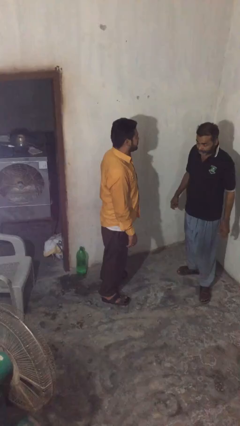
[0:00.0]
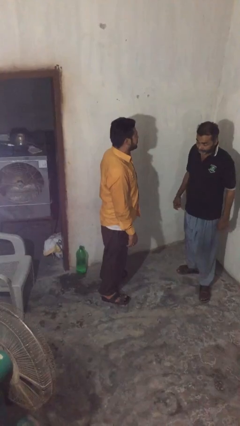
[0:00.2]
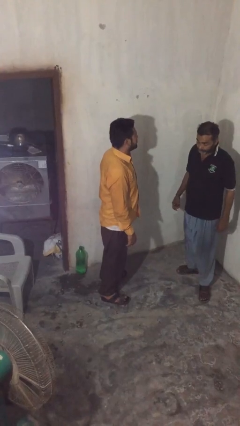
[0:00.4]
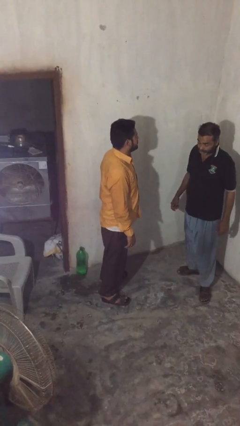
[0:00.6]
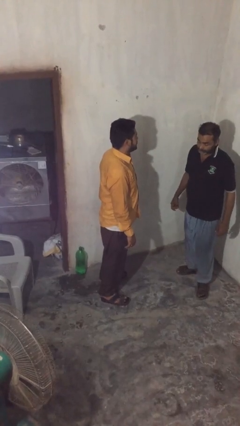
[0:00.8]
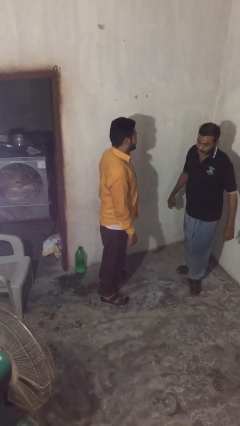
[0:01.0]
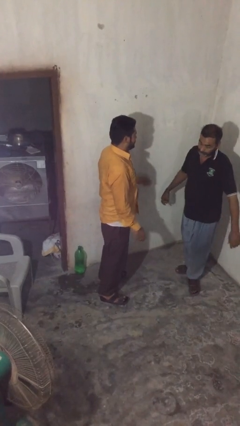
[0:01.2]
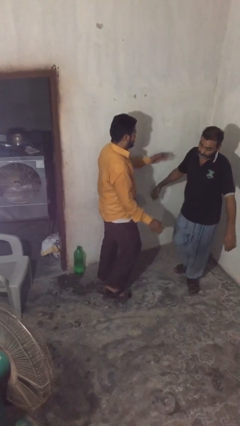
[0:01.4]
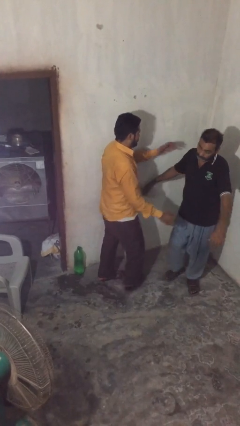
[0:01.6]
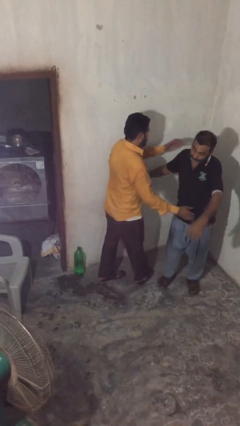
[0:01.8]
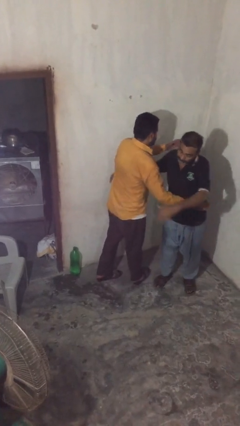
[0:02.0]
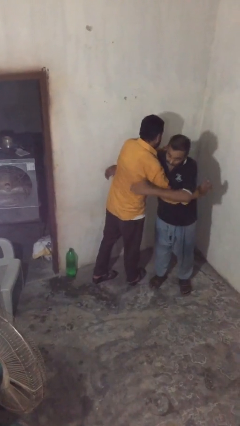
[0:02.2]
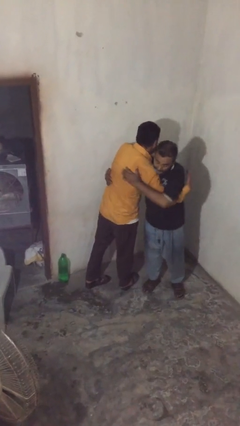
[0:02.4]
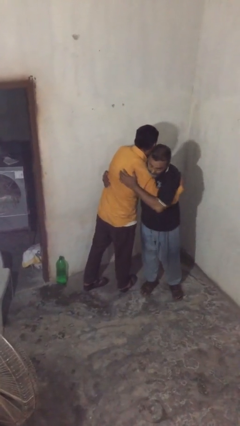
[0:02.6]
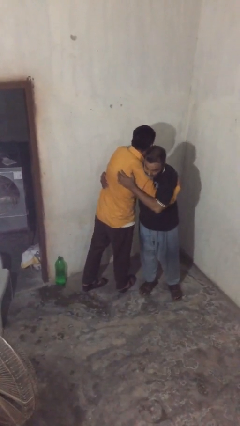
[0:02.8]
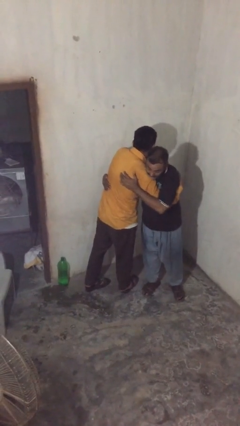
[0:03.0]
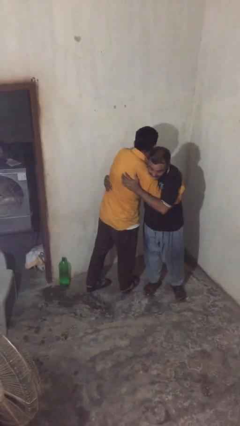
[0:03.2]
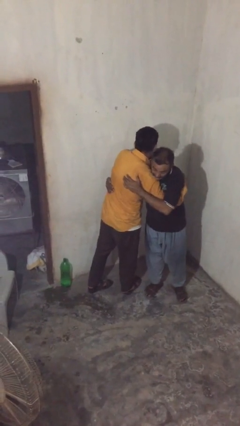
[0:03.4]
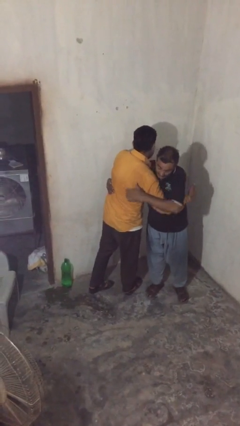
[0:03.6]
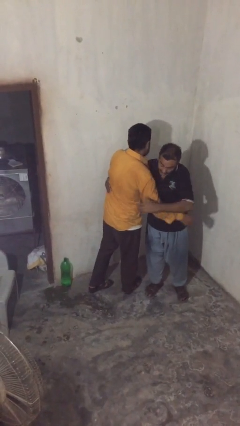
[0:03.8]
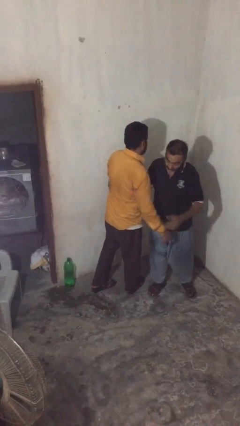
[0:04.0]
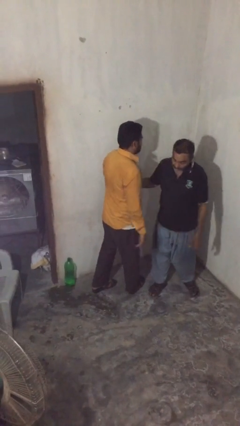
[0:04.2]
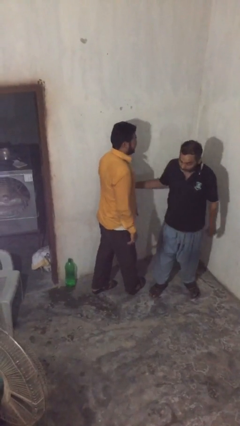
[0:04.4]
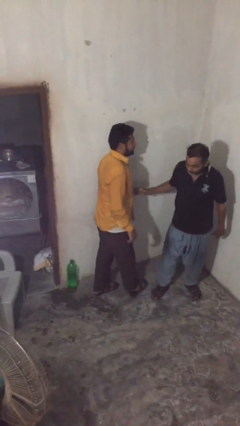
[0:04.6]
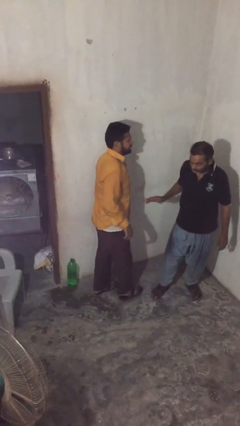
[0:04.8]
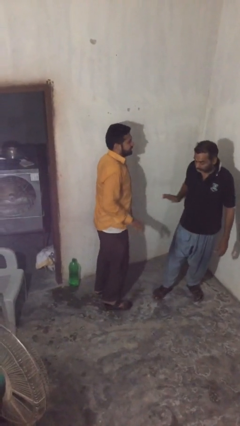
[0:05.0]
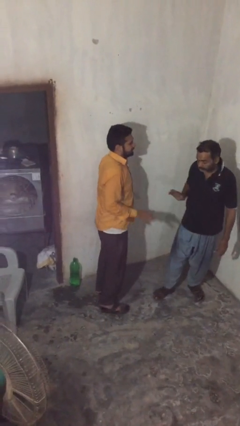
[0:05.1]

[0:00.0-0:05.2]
person embraces person

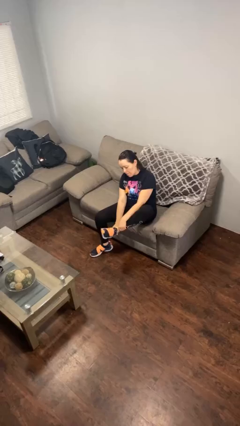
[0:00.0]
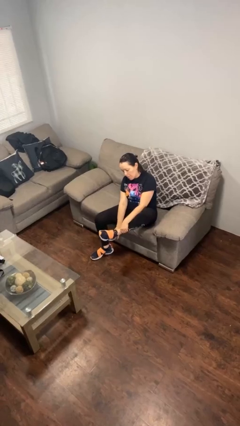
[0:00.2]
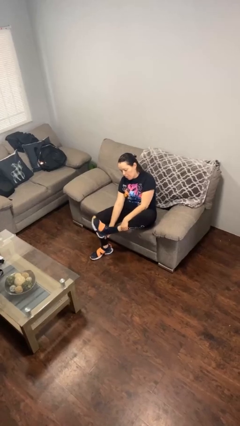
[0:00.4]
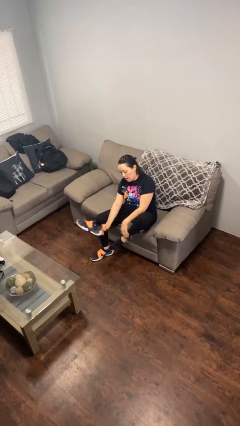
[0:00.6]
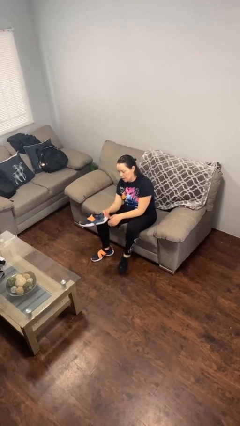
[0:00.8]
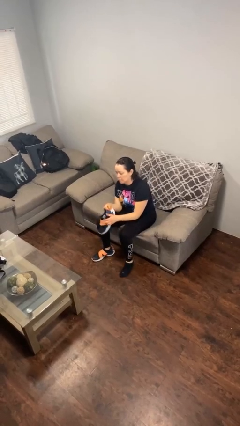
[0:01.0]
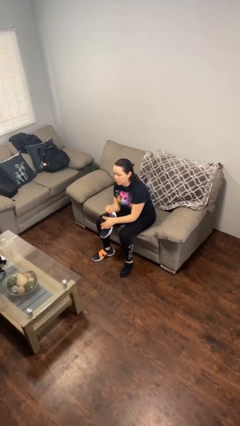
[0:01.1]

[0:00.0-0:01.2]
person takes off shoes

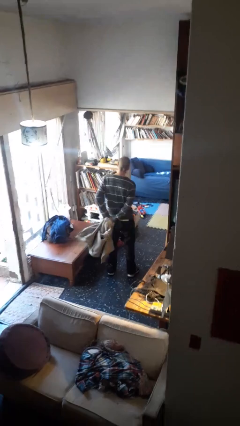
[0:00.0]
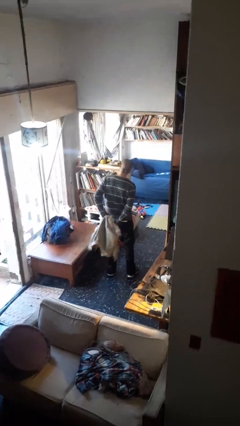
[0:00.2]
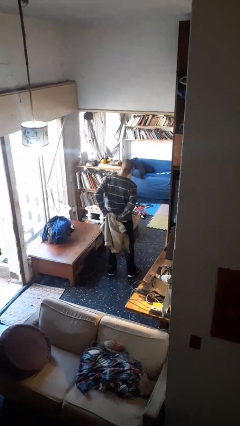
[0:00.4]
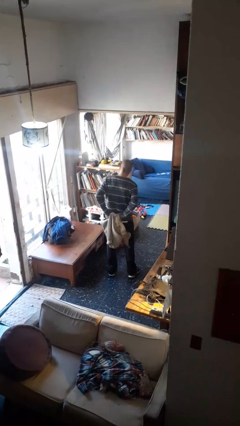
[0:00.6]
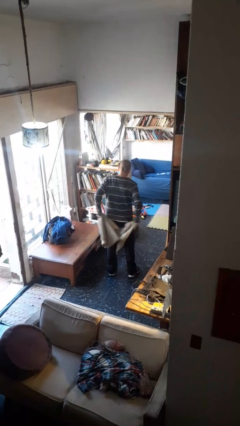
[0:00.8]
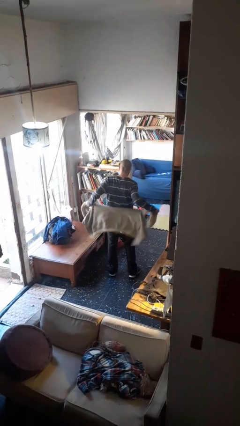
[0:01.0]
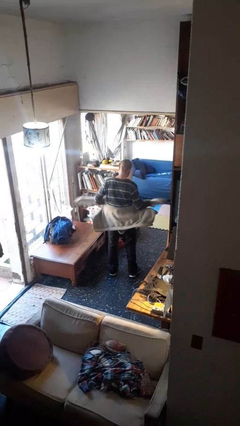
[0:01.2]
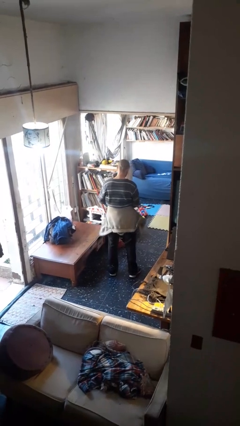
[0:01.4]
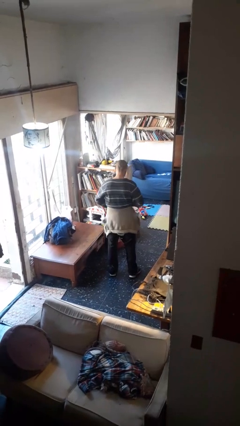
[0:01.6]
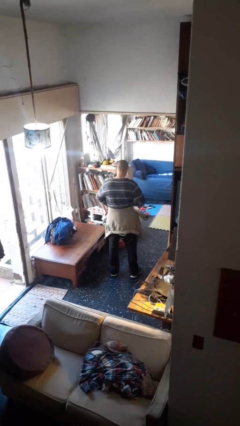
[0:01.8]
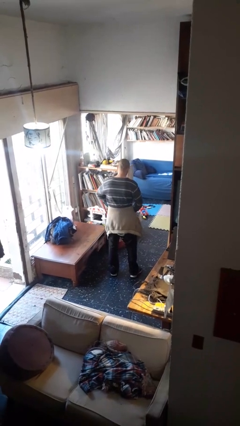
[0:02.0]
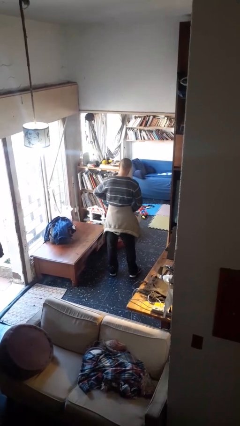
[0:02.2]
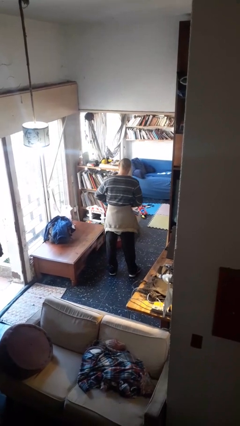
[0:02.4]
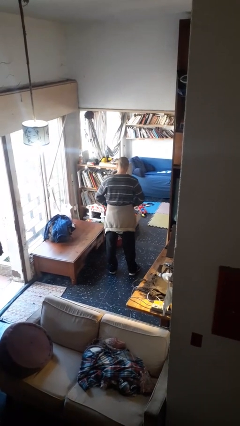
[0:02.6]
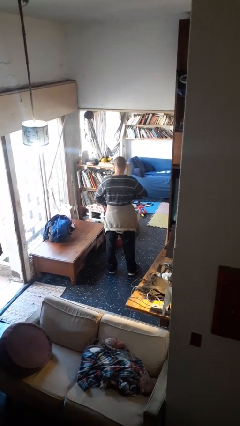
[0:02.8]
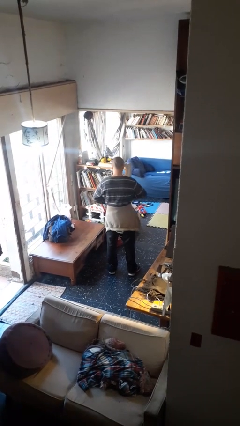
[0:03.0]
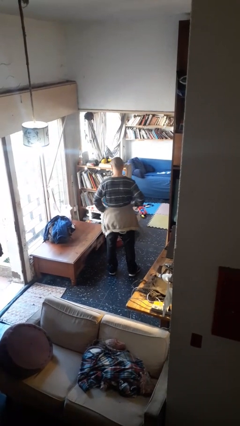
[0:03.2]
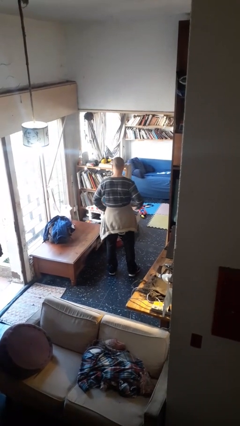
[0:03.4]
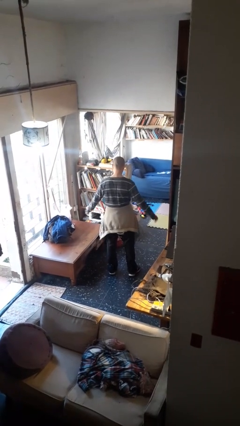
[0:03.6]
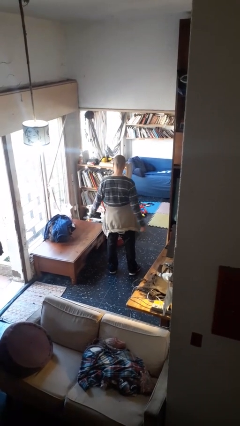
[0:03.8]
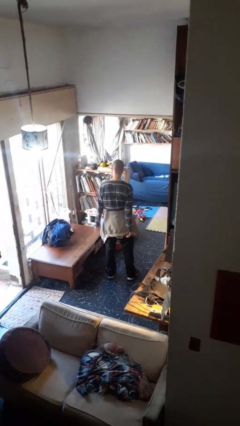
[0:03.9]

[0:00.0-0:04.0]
person ties jacket around waist

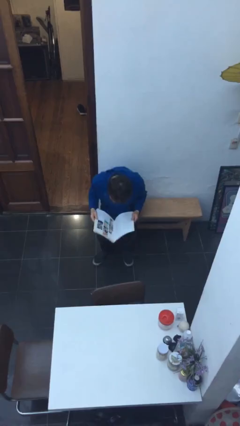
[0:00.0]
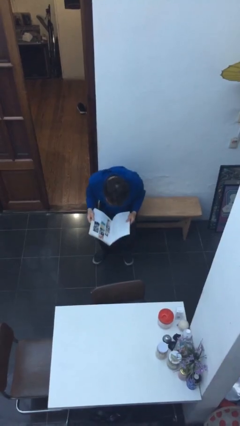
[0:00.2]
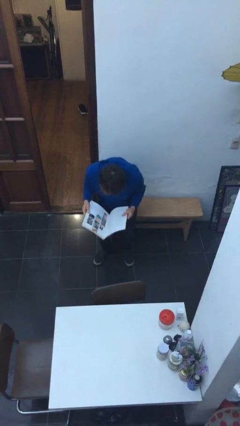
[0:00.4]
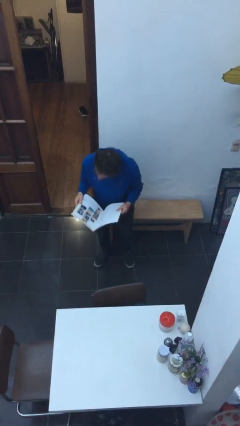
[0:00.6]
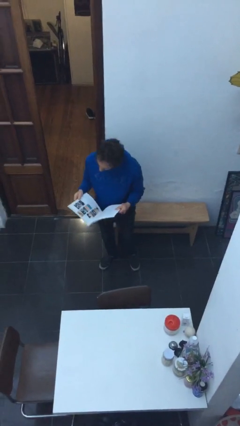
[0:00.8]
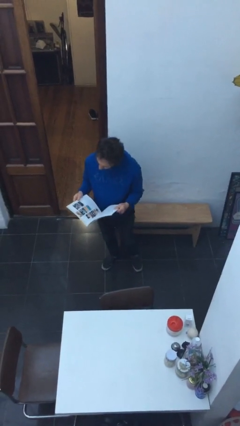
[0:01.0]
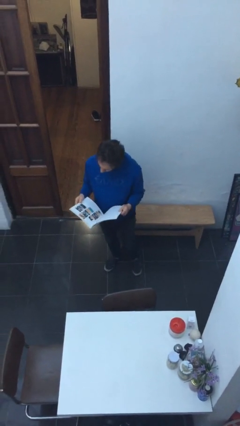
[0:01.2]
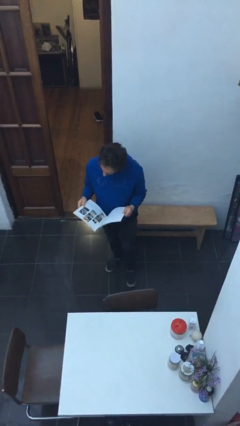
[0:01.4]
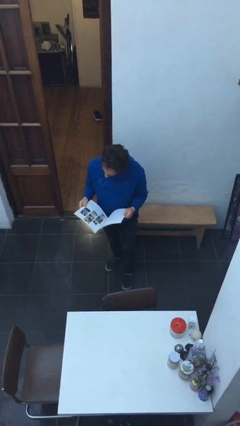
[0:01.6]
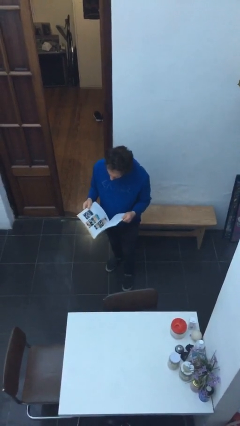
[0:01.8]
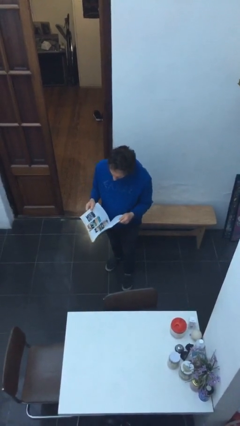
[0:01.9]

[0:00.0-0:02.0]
person stands up

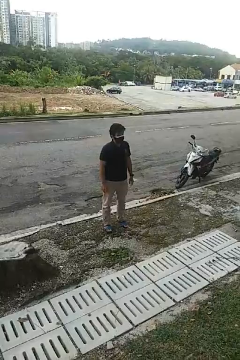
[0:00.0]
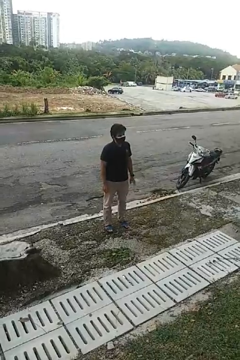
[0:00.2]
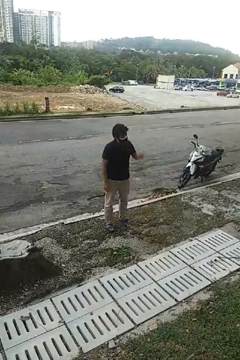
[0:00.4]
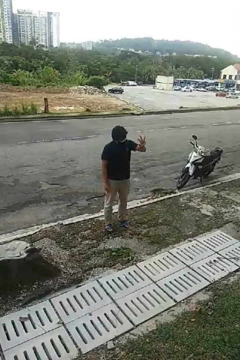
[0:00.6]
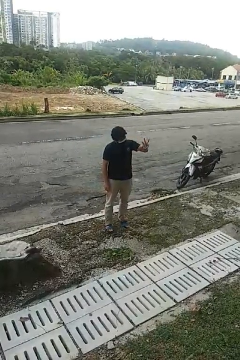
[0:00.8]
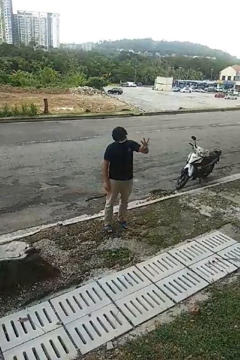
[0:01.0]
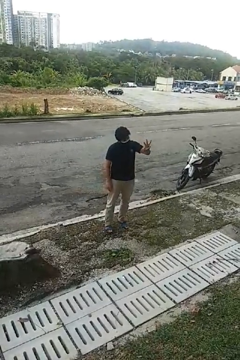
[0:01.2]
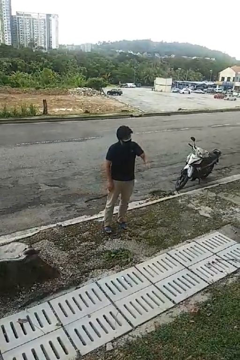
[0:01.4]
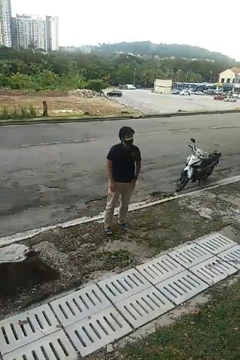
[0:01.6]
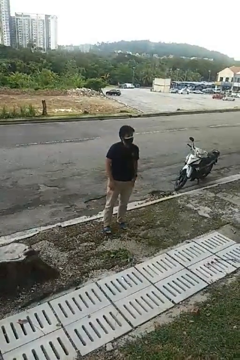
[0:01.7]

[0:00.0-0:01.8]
person gestures number three

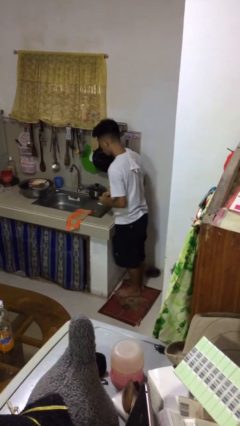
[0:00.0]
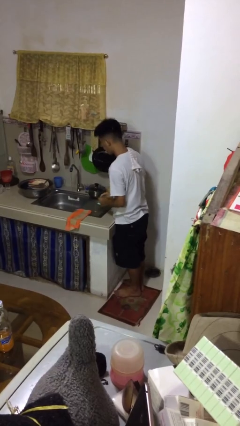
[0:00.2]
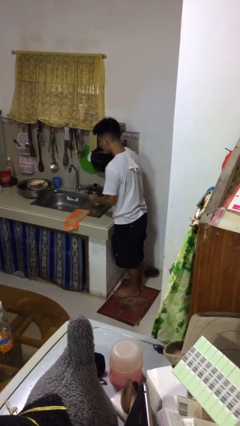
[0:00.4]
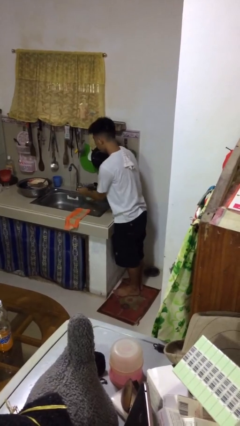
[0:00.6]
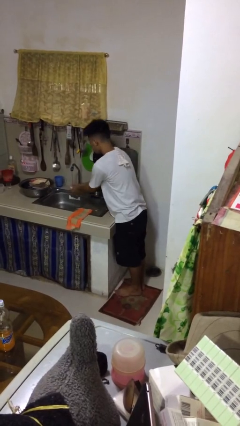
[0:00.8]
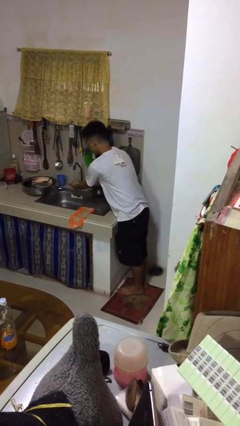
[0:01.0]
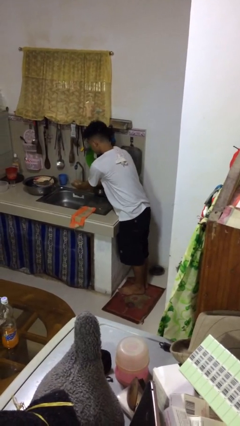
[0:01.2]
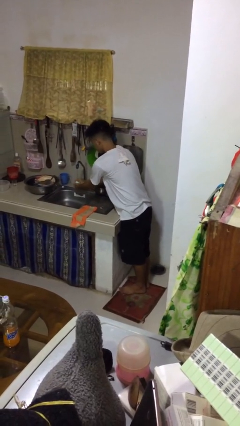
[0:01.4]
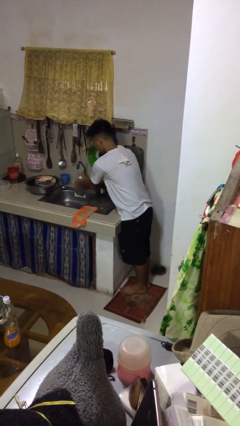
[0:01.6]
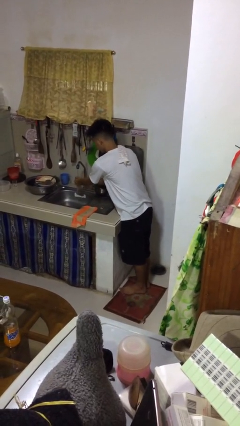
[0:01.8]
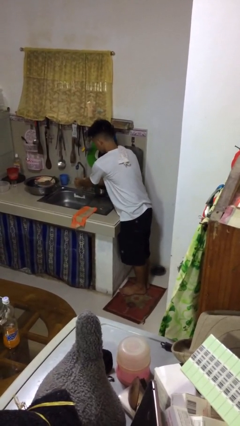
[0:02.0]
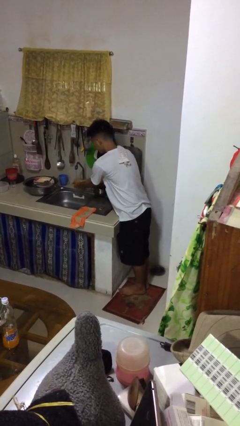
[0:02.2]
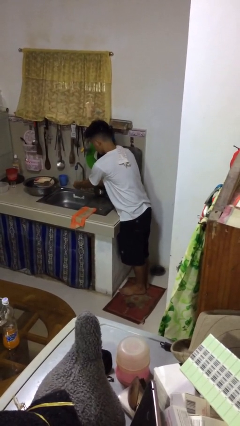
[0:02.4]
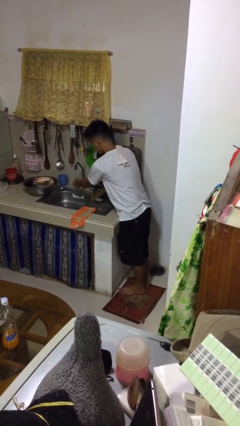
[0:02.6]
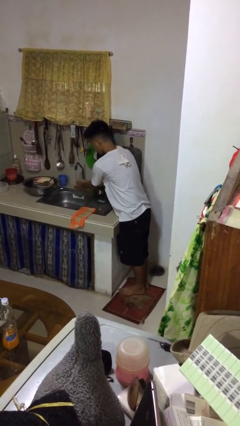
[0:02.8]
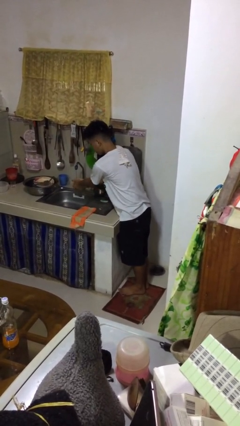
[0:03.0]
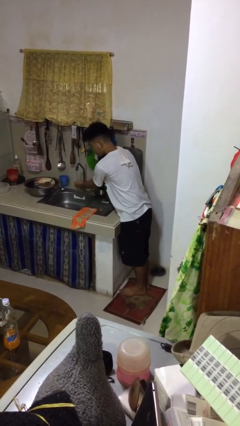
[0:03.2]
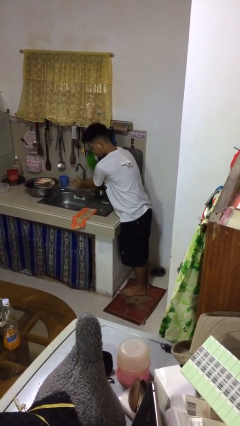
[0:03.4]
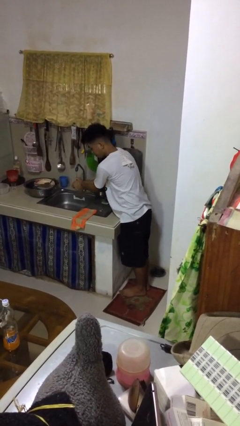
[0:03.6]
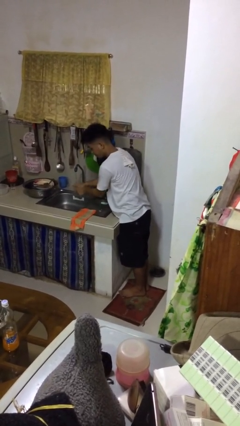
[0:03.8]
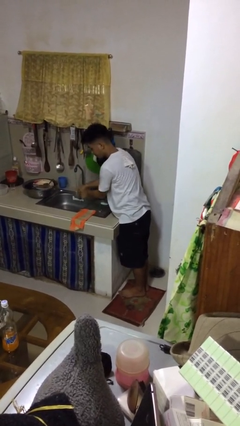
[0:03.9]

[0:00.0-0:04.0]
person washes hands
